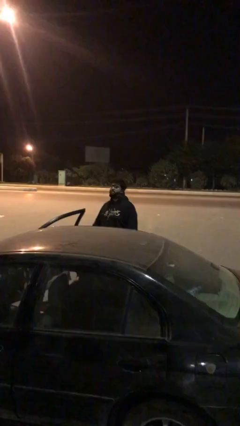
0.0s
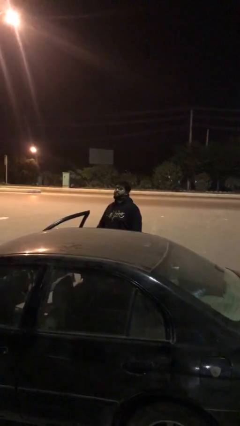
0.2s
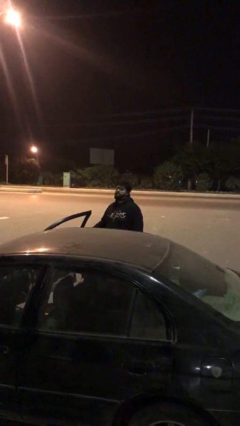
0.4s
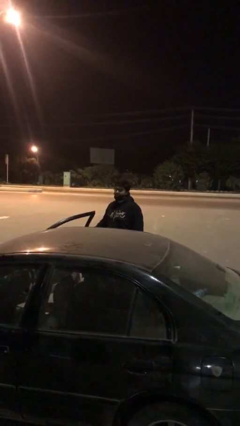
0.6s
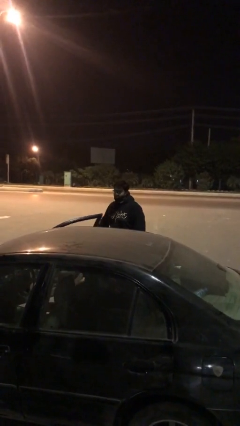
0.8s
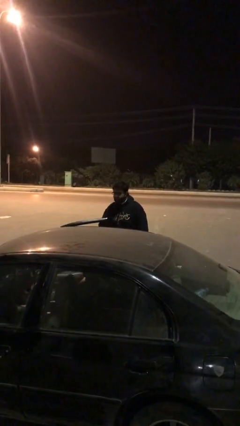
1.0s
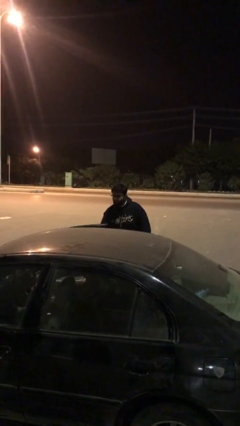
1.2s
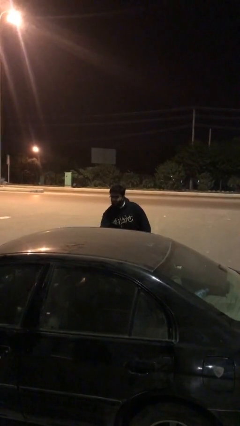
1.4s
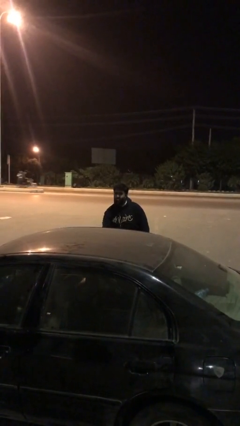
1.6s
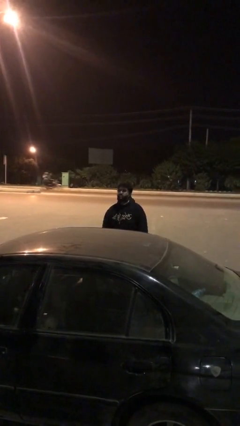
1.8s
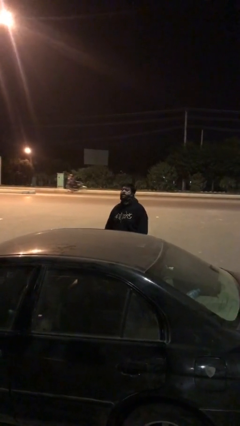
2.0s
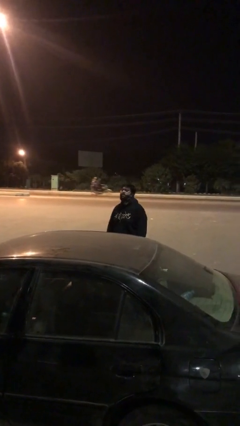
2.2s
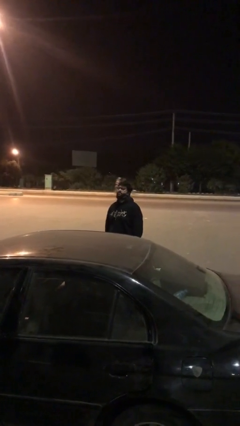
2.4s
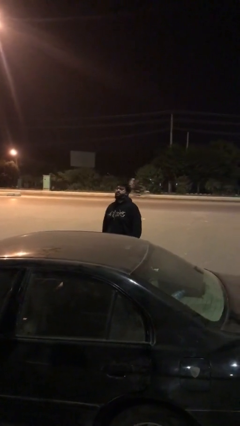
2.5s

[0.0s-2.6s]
person closes car door

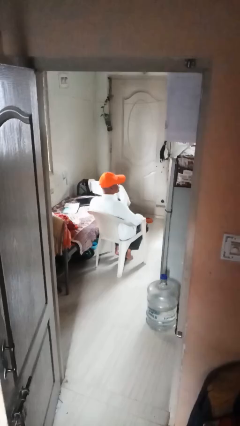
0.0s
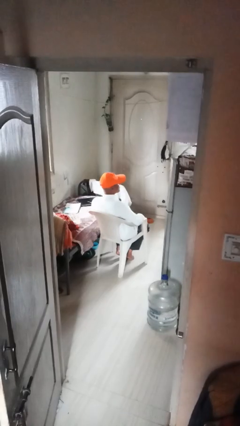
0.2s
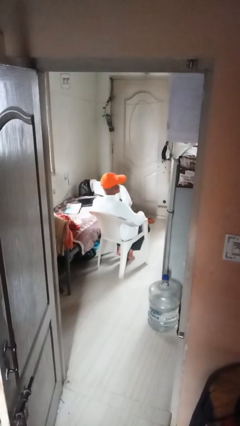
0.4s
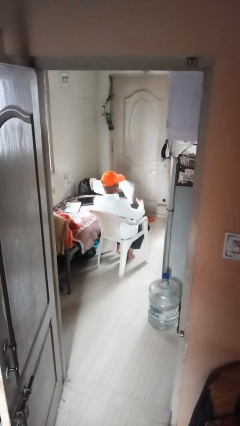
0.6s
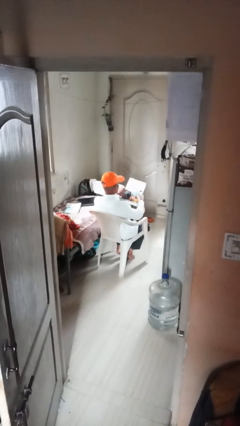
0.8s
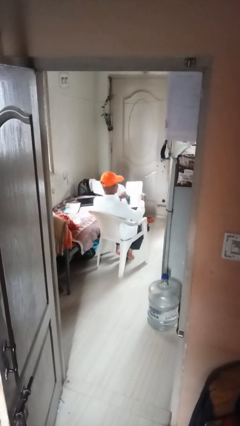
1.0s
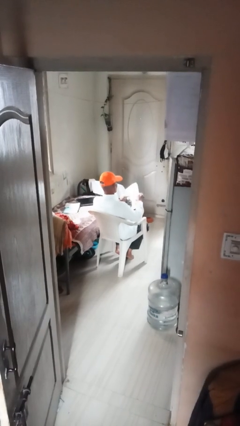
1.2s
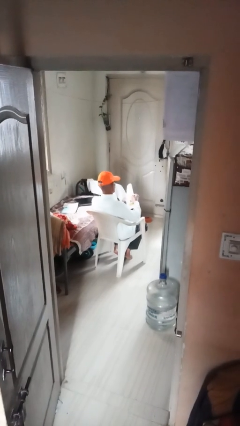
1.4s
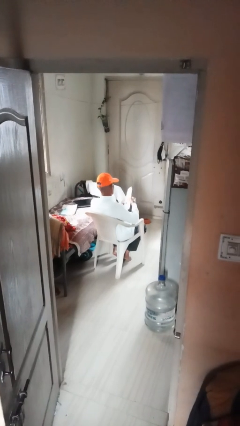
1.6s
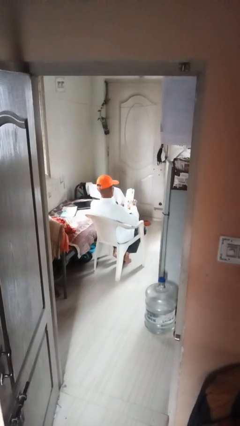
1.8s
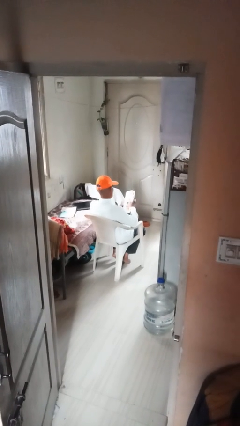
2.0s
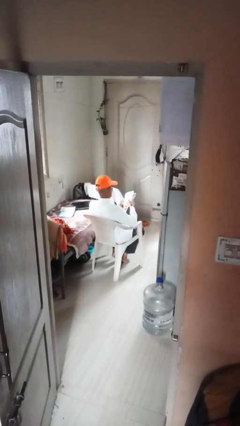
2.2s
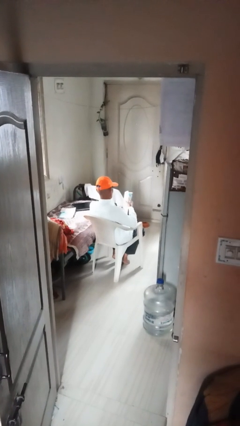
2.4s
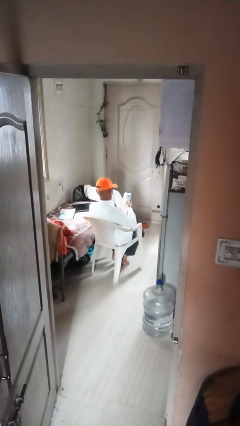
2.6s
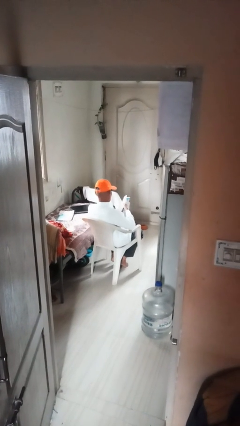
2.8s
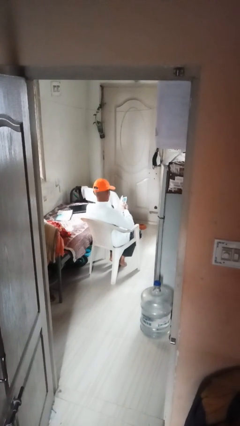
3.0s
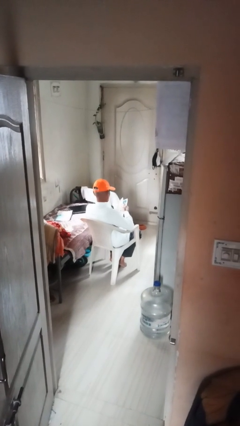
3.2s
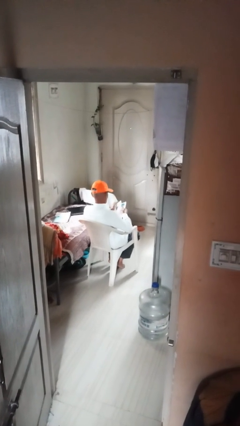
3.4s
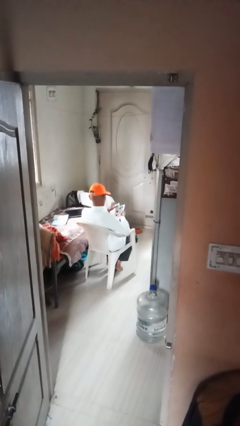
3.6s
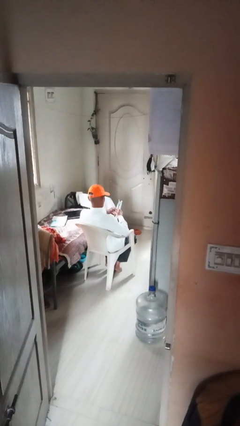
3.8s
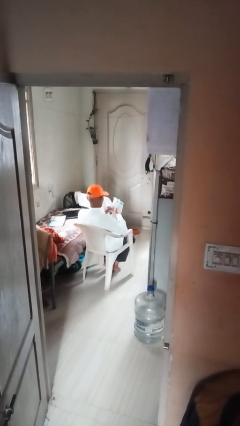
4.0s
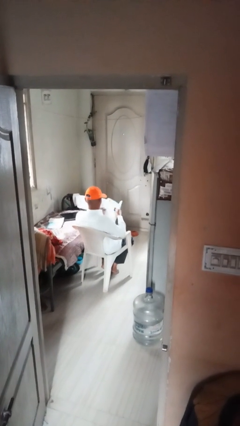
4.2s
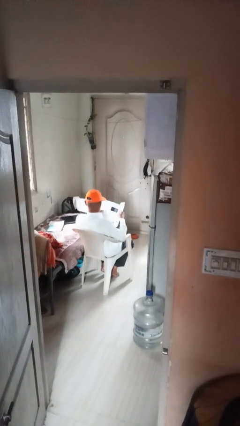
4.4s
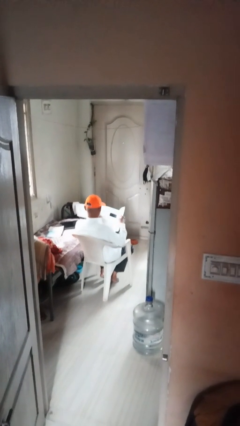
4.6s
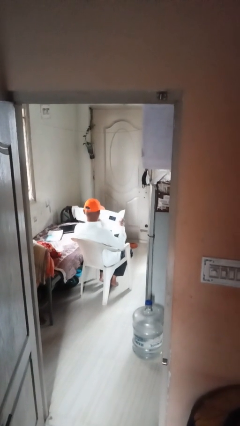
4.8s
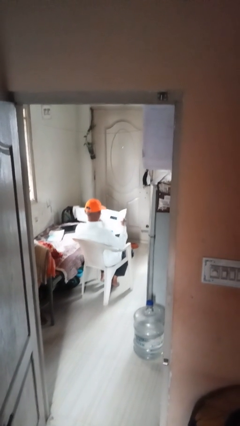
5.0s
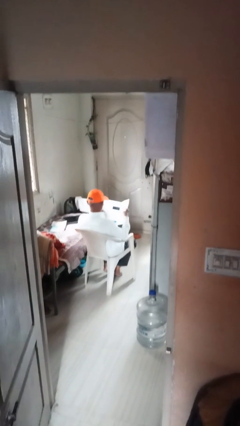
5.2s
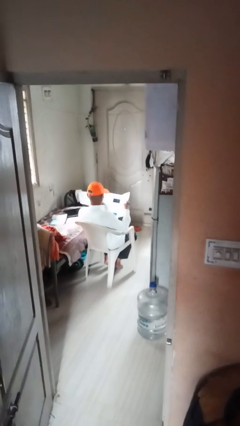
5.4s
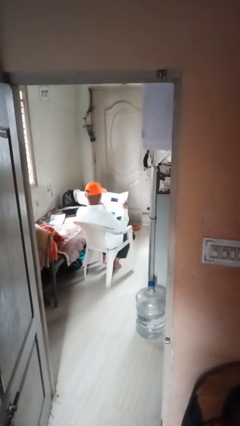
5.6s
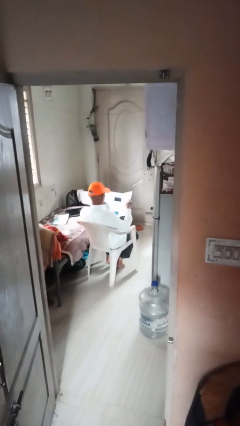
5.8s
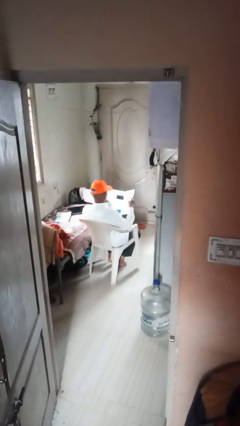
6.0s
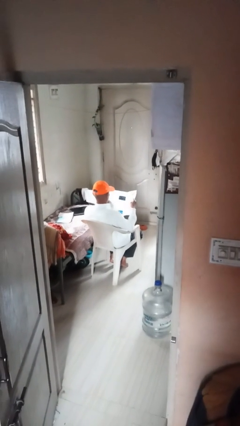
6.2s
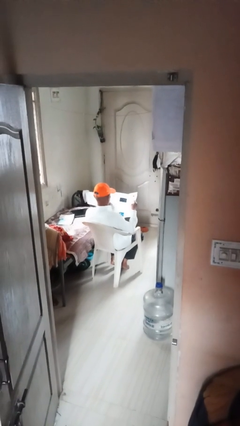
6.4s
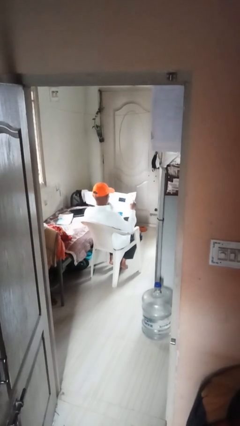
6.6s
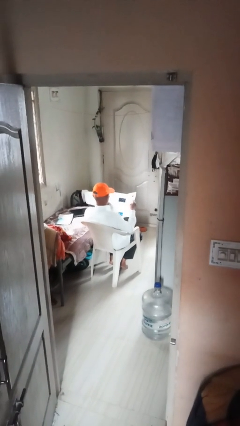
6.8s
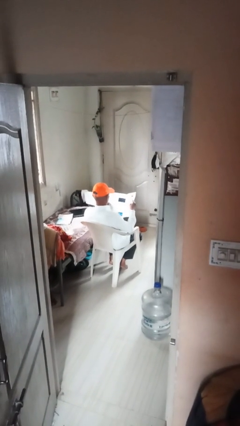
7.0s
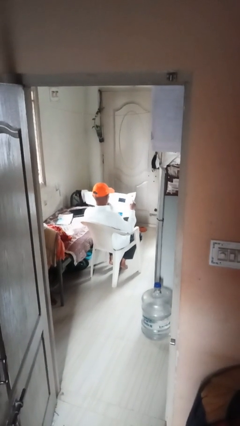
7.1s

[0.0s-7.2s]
person reads magazine

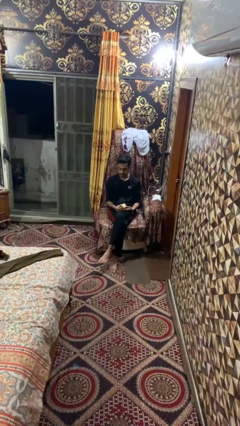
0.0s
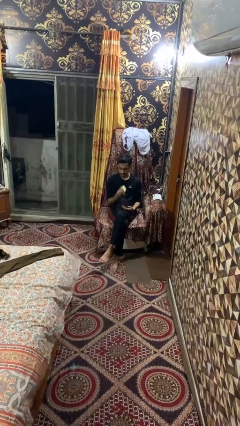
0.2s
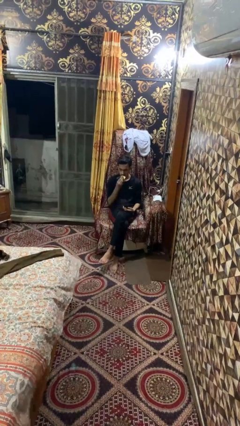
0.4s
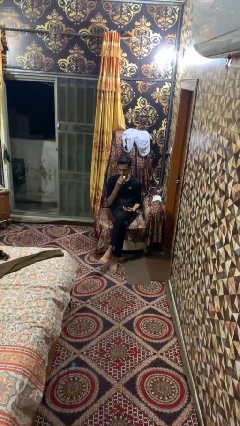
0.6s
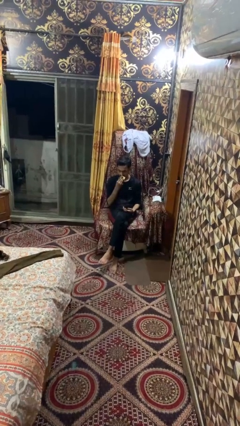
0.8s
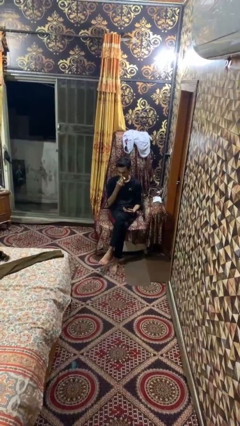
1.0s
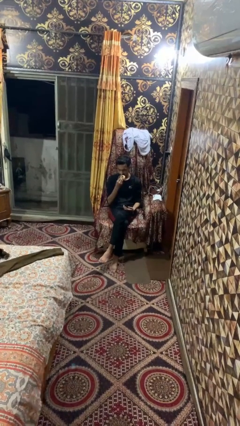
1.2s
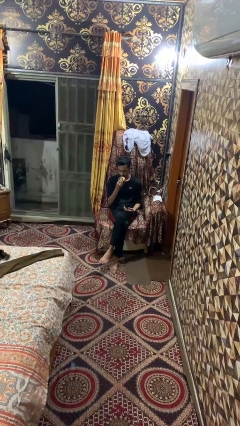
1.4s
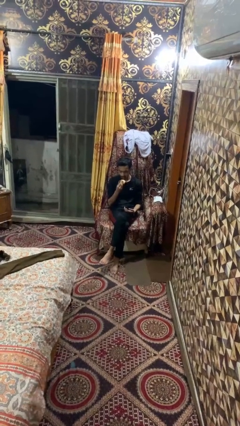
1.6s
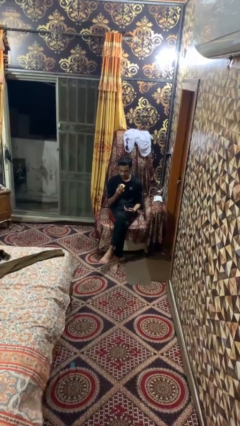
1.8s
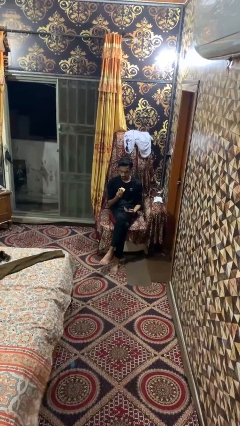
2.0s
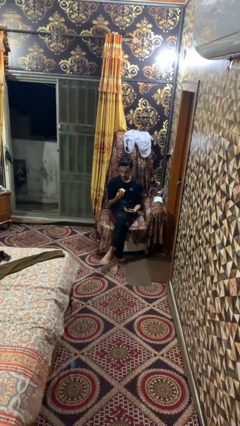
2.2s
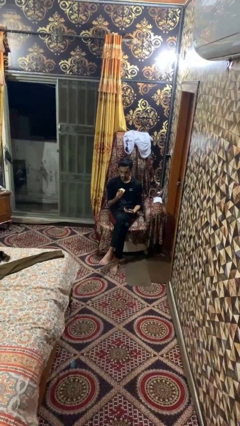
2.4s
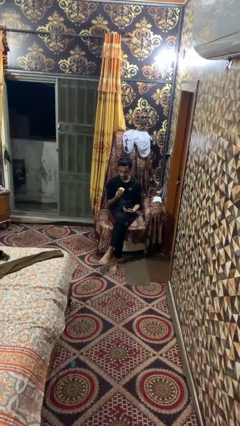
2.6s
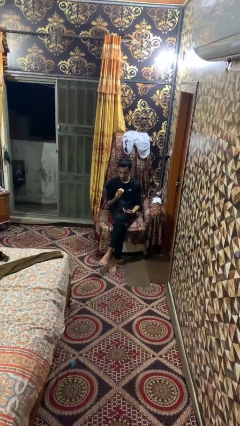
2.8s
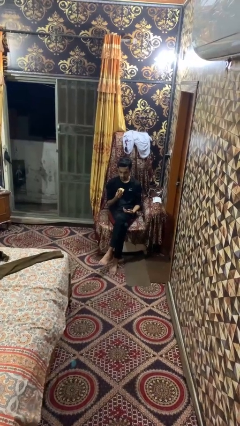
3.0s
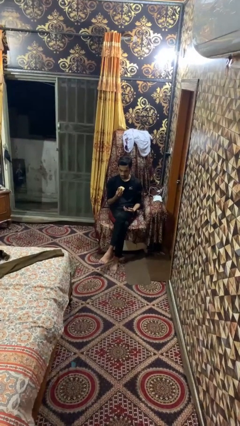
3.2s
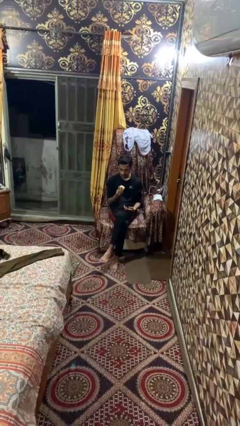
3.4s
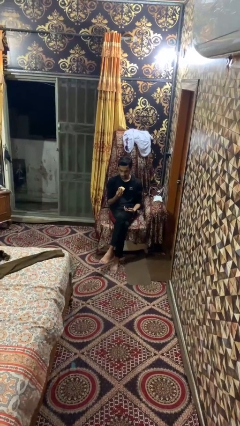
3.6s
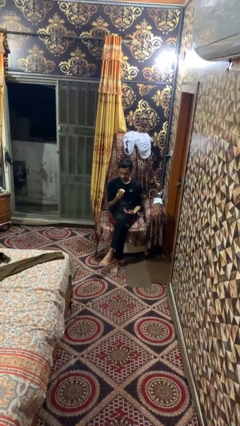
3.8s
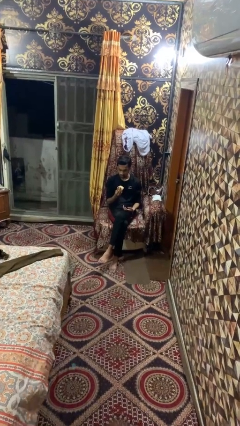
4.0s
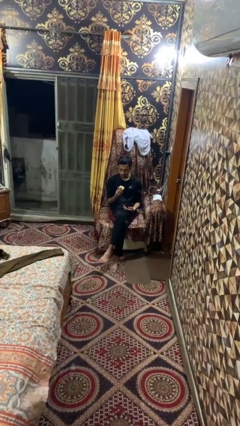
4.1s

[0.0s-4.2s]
person eats banana

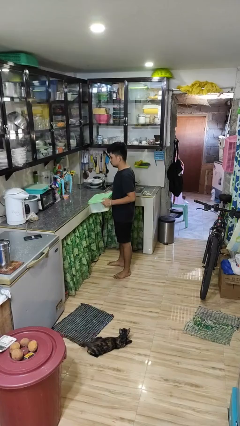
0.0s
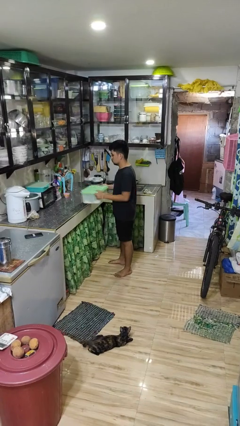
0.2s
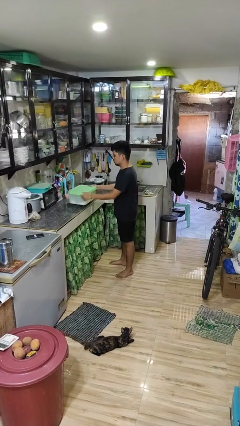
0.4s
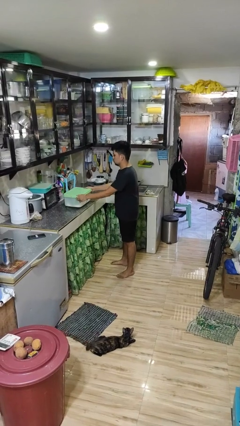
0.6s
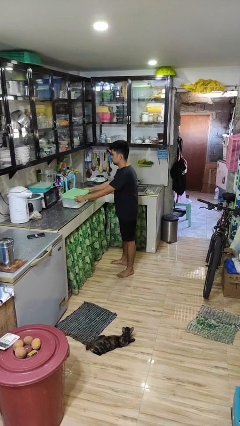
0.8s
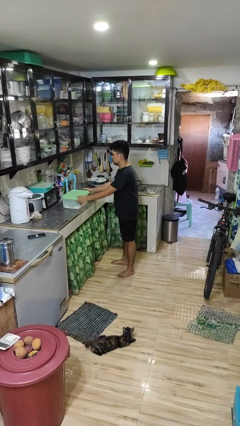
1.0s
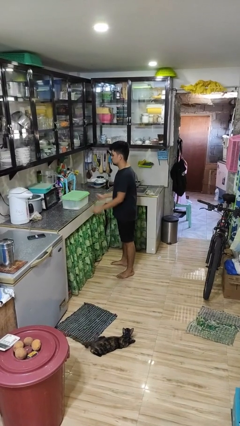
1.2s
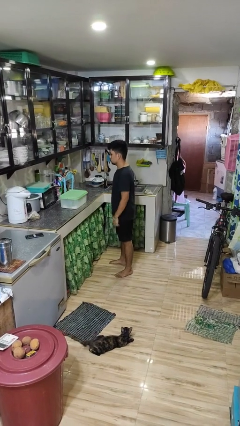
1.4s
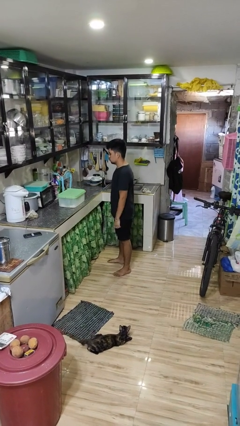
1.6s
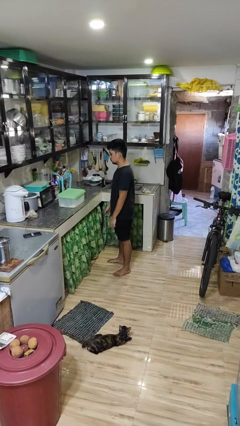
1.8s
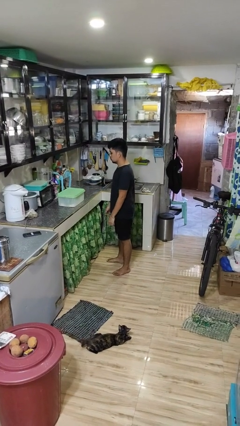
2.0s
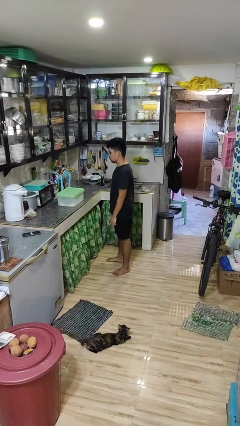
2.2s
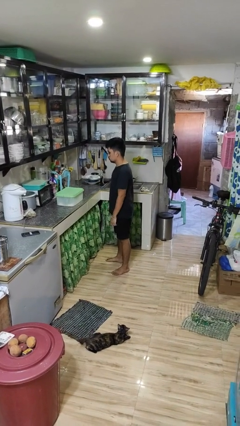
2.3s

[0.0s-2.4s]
person puts down object on countertop

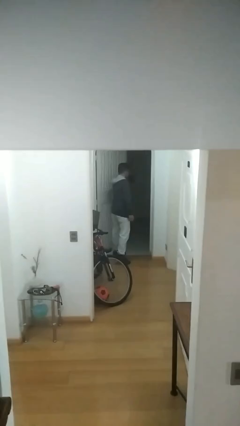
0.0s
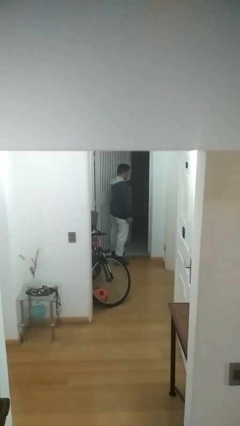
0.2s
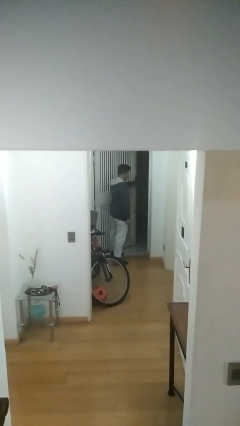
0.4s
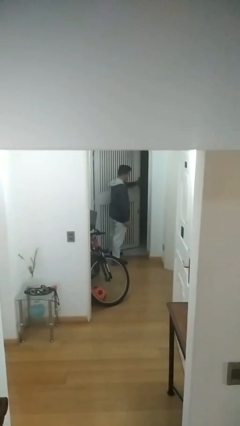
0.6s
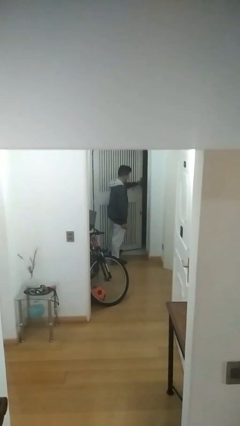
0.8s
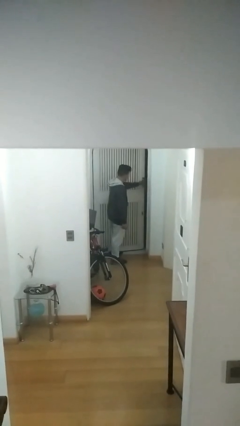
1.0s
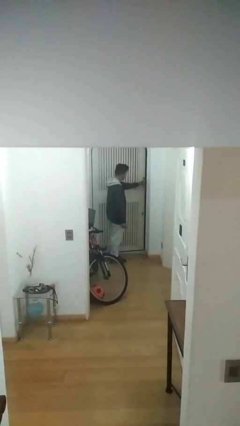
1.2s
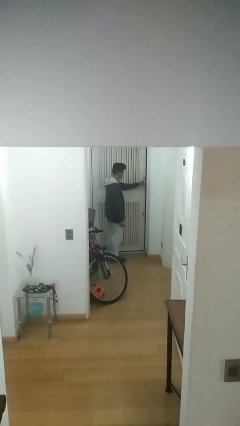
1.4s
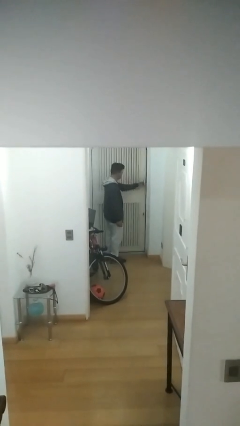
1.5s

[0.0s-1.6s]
person closes facility door
